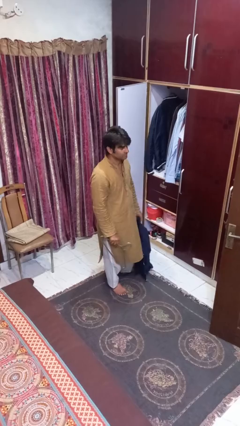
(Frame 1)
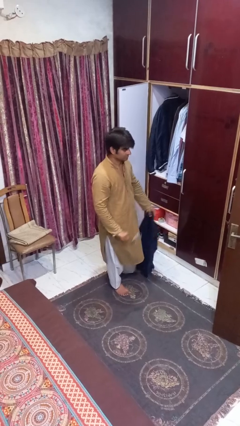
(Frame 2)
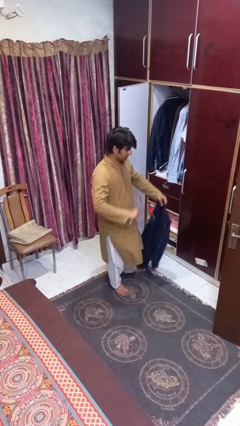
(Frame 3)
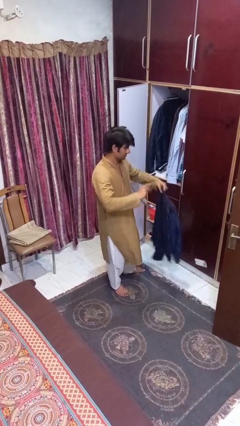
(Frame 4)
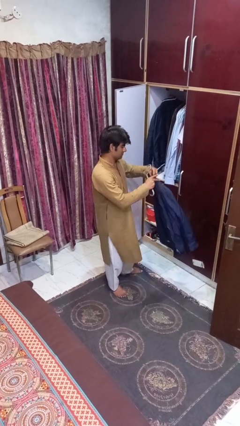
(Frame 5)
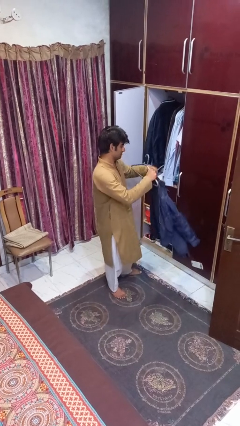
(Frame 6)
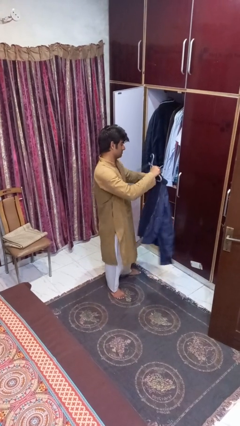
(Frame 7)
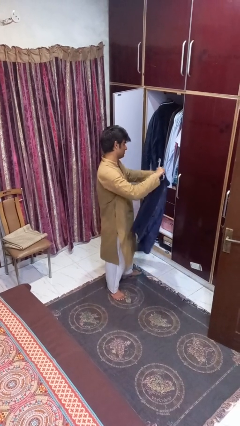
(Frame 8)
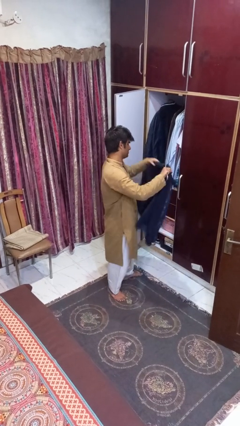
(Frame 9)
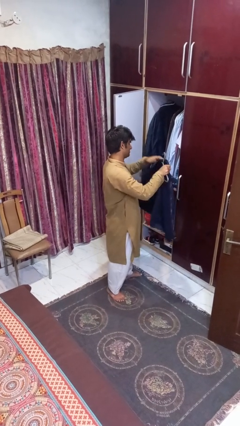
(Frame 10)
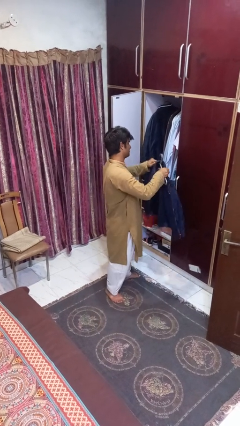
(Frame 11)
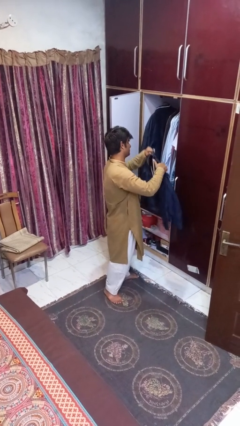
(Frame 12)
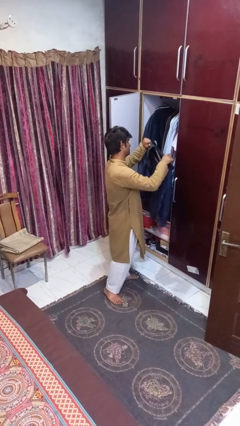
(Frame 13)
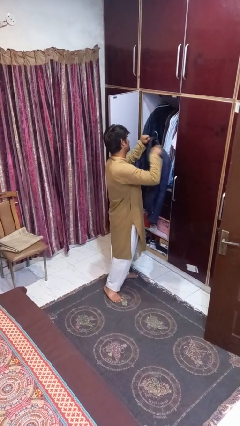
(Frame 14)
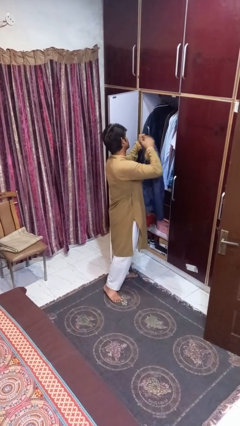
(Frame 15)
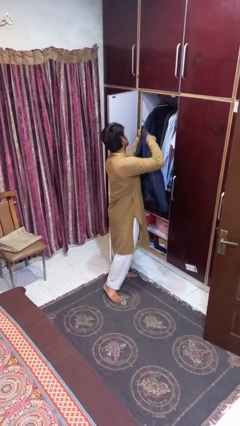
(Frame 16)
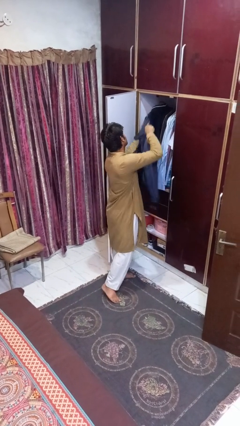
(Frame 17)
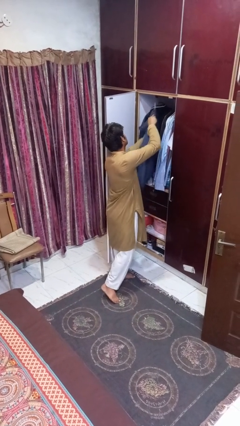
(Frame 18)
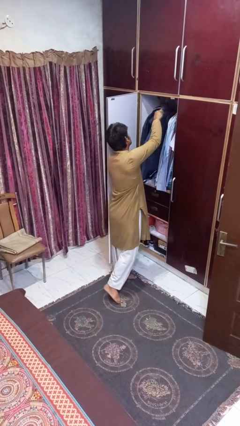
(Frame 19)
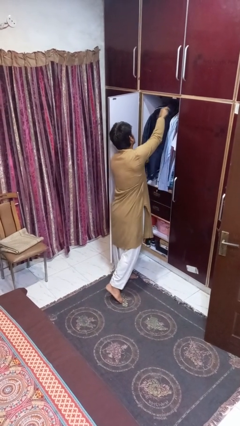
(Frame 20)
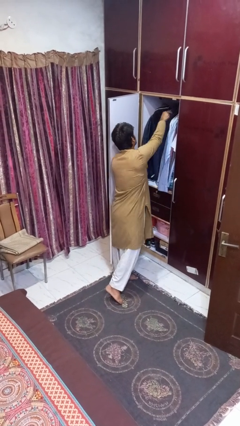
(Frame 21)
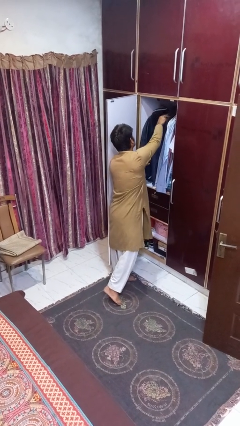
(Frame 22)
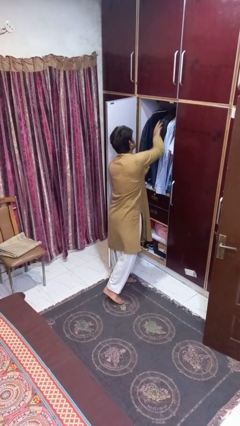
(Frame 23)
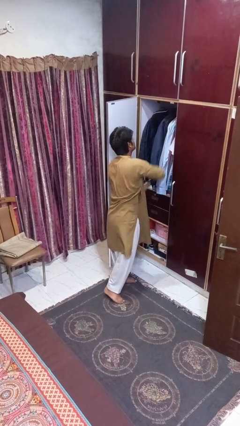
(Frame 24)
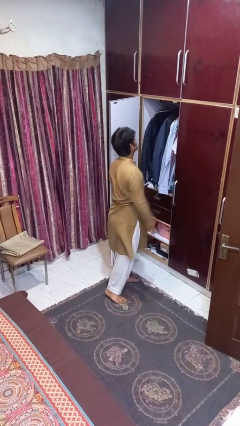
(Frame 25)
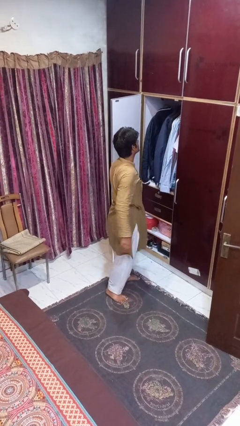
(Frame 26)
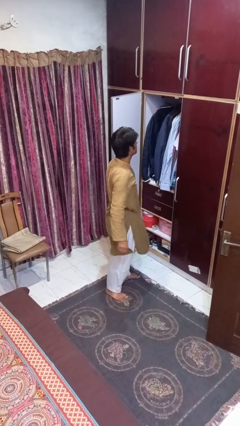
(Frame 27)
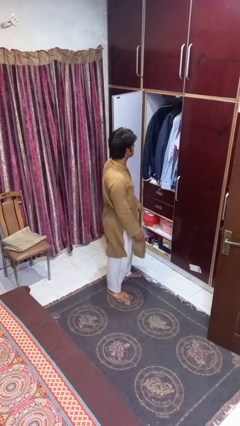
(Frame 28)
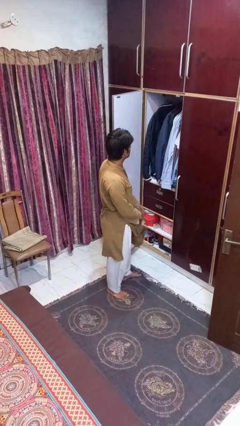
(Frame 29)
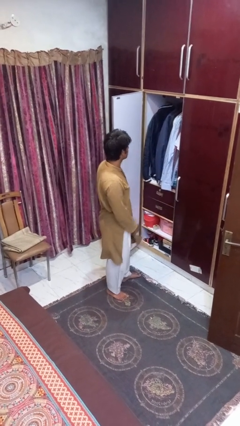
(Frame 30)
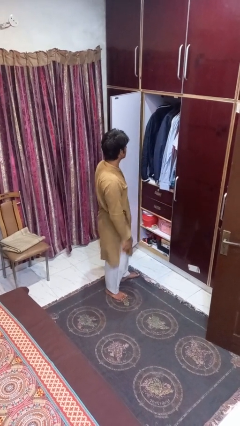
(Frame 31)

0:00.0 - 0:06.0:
person puts clothes into closet

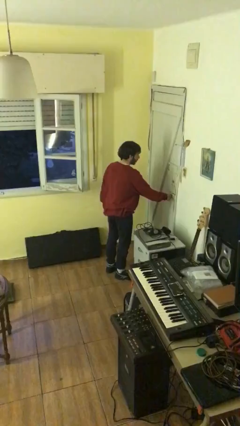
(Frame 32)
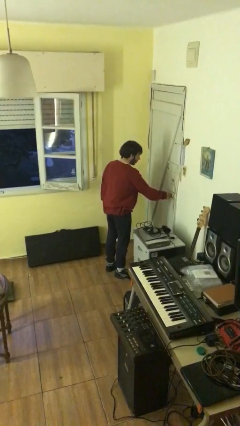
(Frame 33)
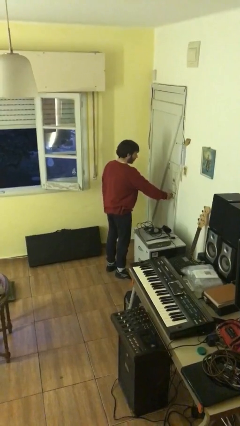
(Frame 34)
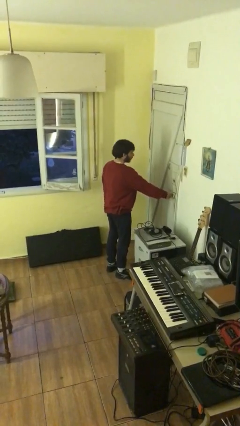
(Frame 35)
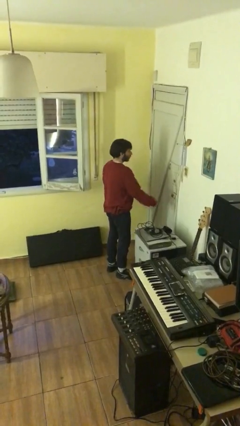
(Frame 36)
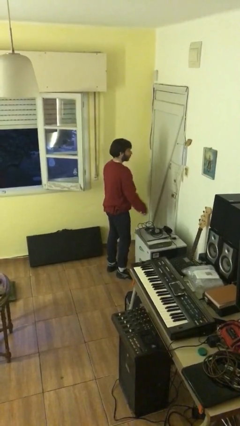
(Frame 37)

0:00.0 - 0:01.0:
person locks door with keys

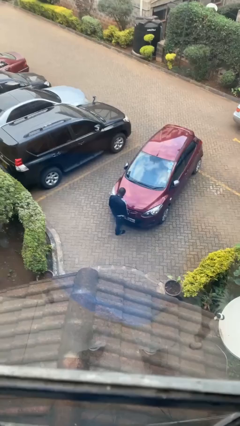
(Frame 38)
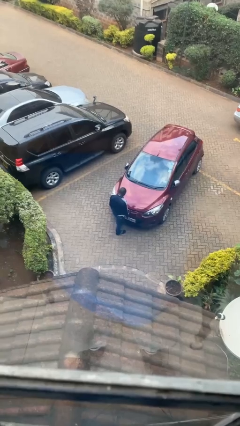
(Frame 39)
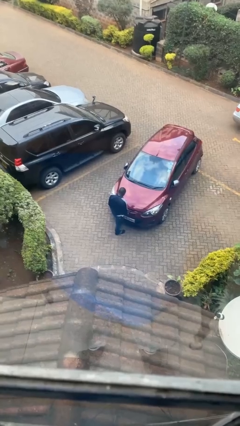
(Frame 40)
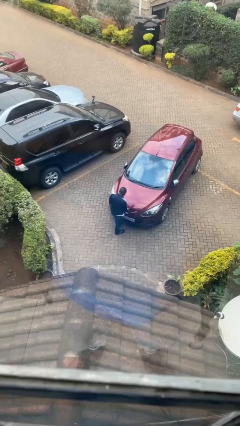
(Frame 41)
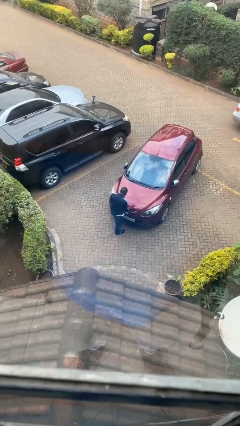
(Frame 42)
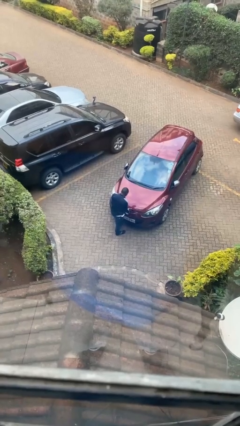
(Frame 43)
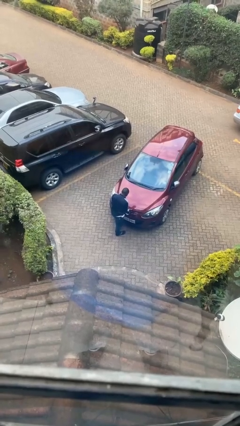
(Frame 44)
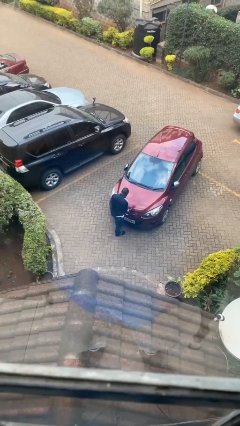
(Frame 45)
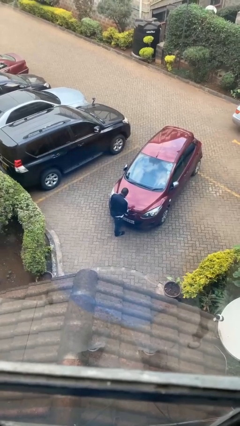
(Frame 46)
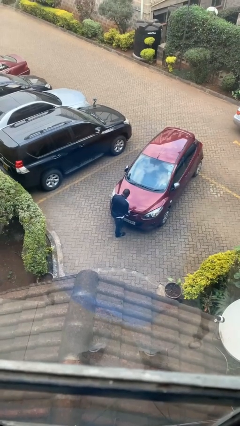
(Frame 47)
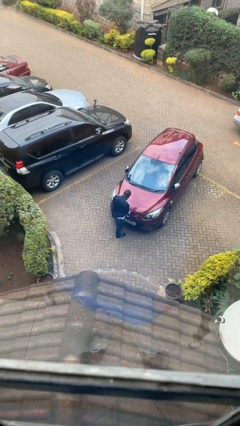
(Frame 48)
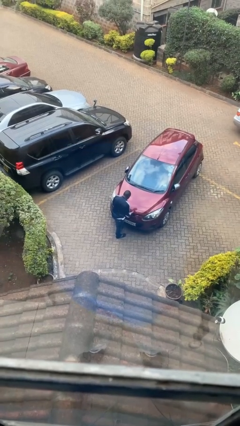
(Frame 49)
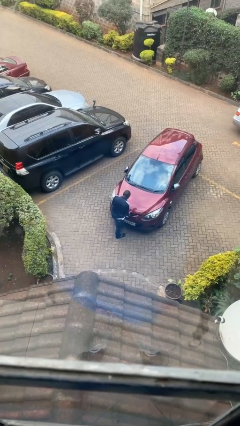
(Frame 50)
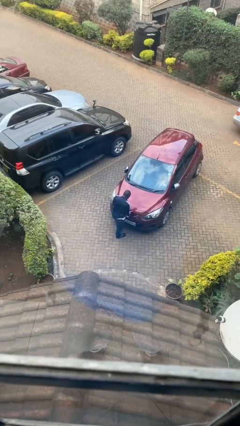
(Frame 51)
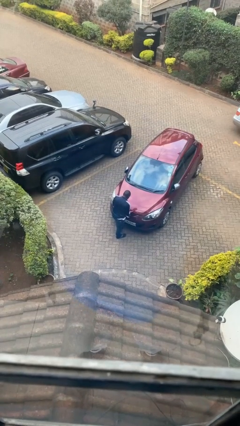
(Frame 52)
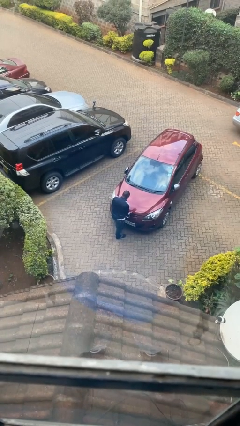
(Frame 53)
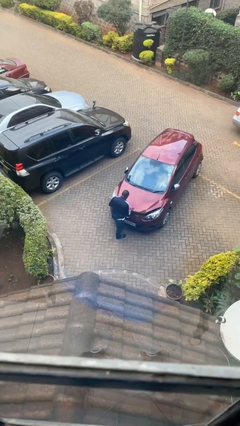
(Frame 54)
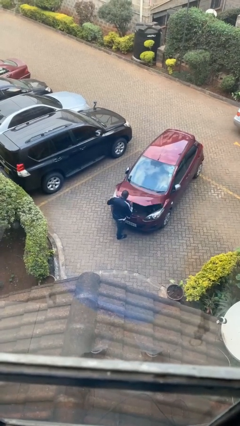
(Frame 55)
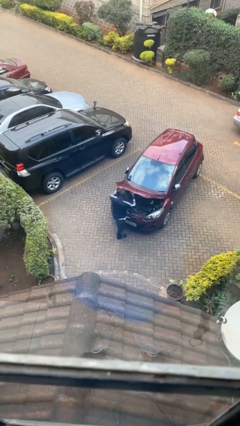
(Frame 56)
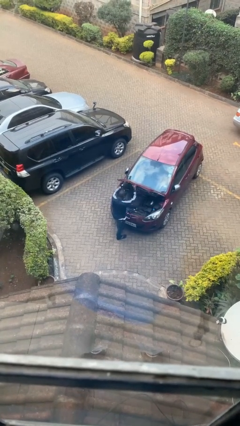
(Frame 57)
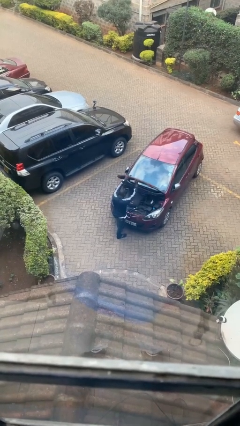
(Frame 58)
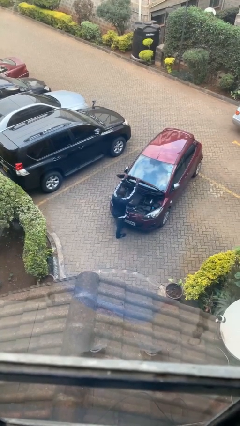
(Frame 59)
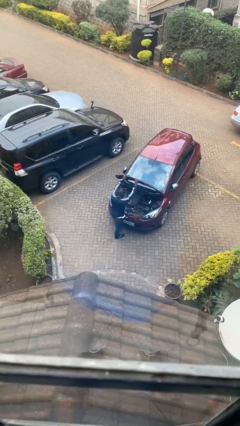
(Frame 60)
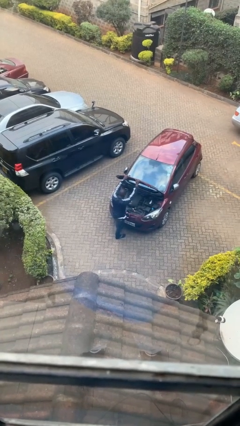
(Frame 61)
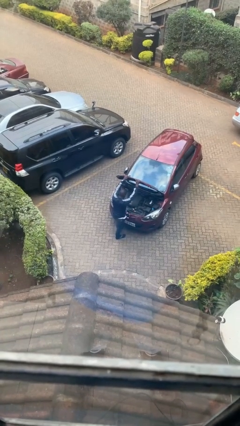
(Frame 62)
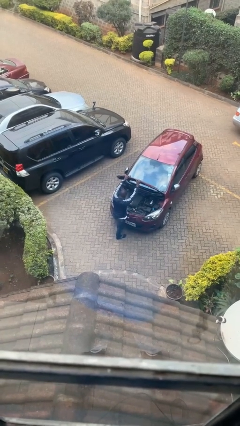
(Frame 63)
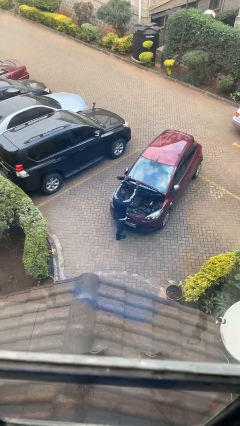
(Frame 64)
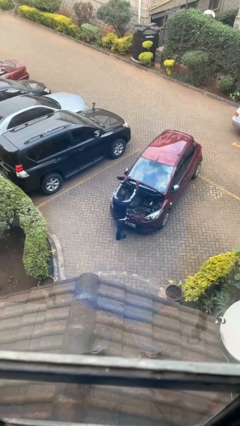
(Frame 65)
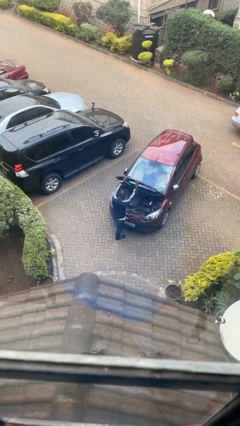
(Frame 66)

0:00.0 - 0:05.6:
person opens car hood

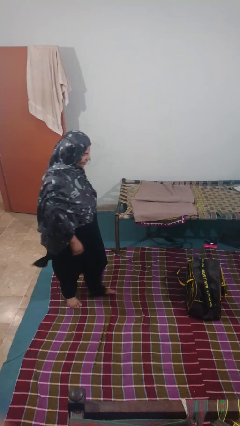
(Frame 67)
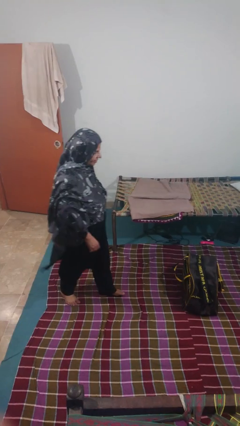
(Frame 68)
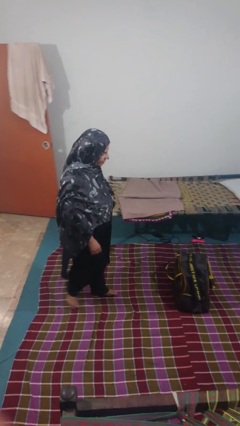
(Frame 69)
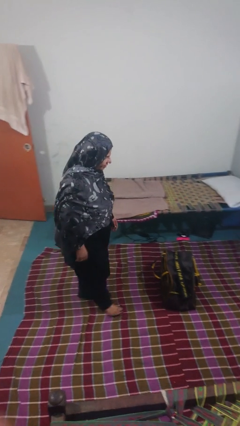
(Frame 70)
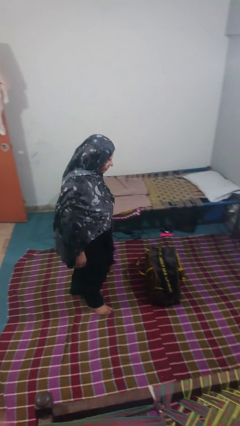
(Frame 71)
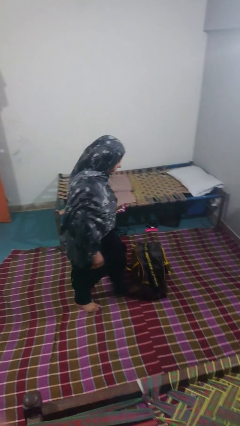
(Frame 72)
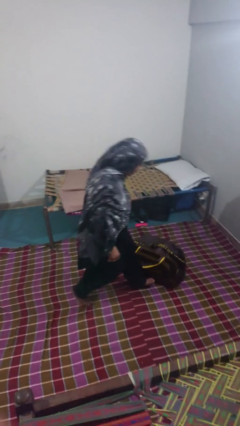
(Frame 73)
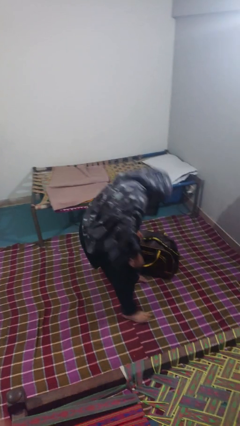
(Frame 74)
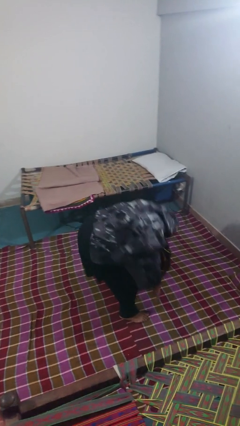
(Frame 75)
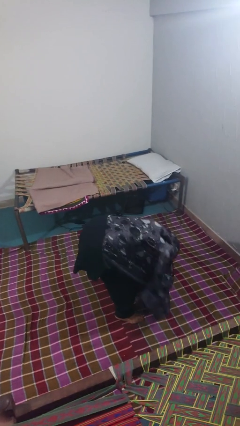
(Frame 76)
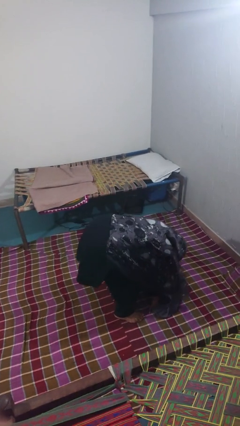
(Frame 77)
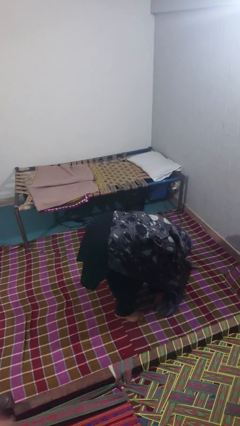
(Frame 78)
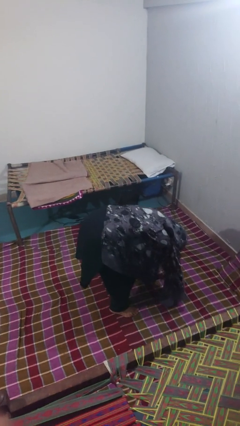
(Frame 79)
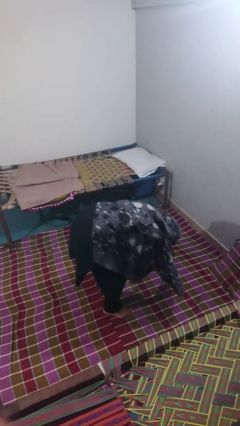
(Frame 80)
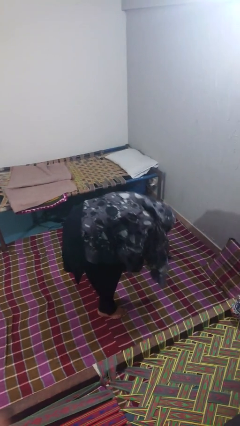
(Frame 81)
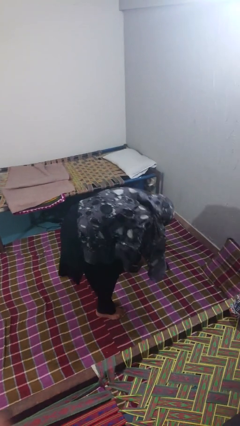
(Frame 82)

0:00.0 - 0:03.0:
person trips on object on floor

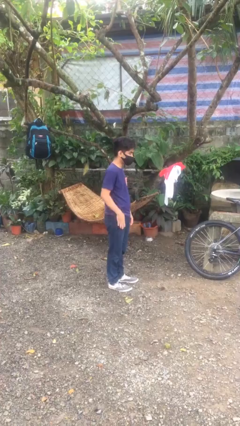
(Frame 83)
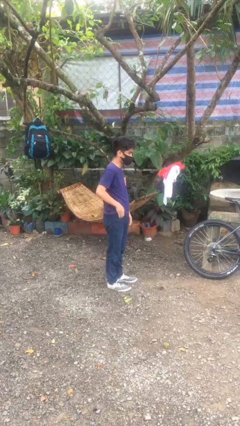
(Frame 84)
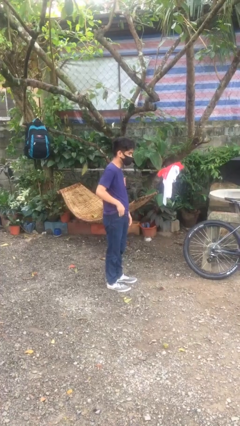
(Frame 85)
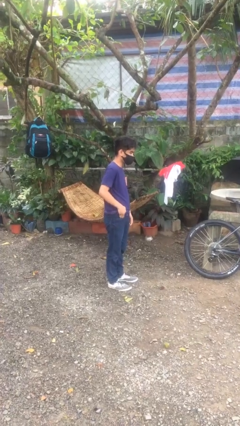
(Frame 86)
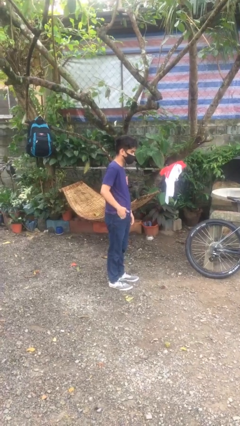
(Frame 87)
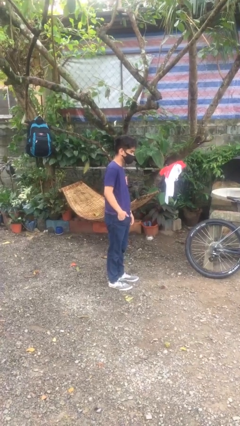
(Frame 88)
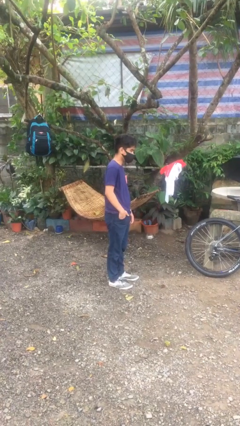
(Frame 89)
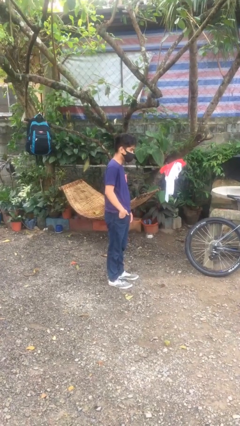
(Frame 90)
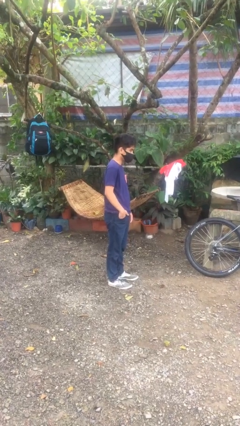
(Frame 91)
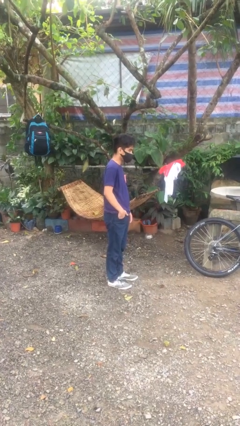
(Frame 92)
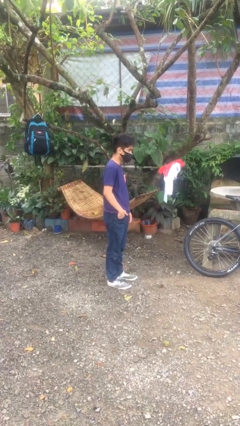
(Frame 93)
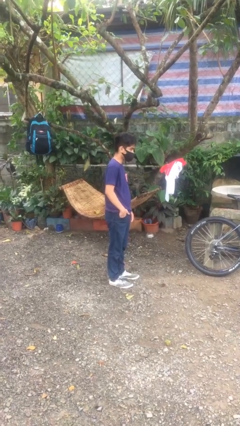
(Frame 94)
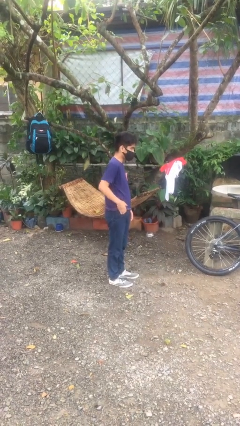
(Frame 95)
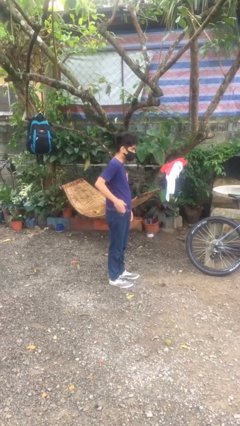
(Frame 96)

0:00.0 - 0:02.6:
person puts hands in back pockets
